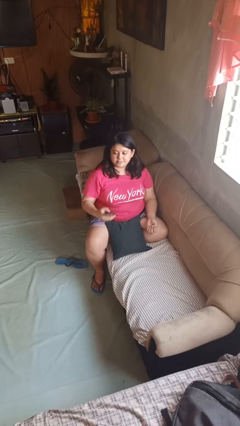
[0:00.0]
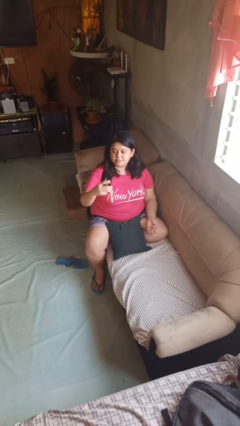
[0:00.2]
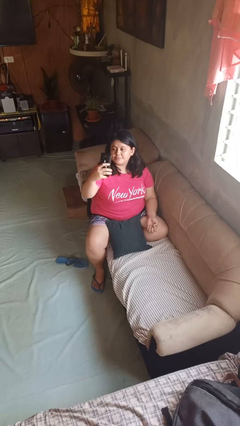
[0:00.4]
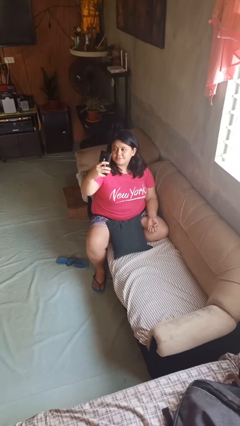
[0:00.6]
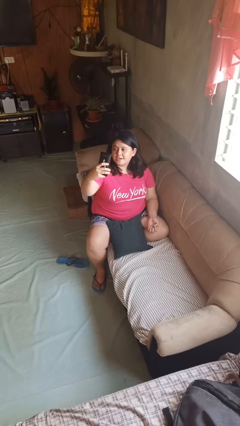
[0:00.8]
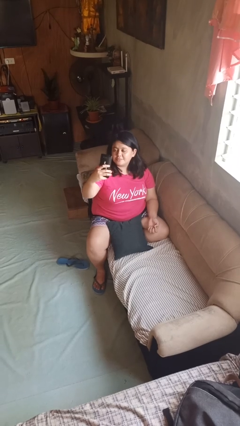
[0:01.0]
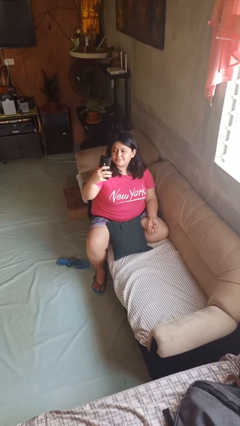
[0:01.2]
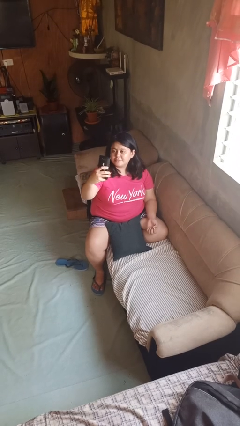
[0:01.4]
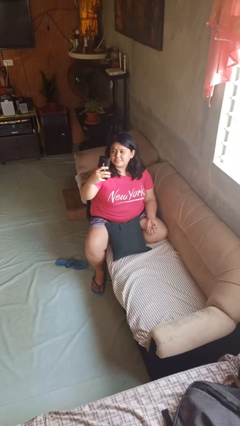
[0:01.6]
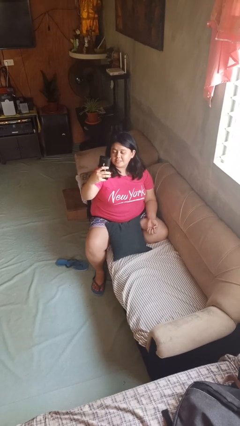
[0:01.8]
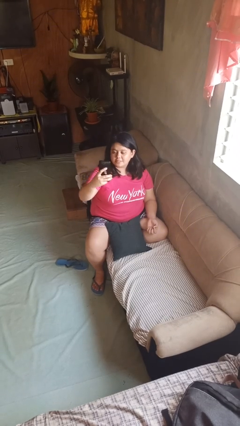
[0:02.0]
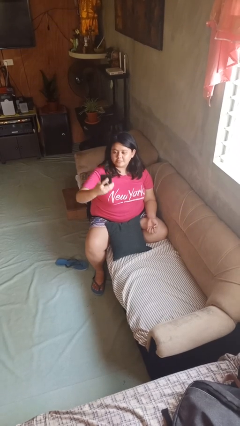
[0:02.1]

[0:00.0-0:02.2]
person takes selfie

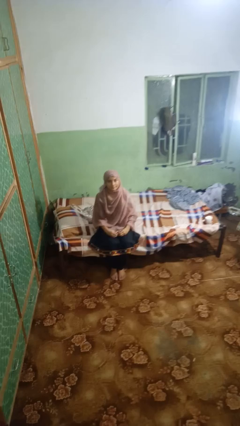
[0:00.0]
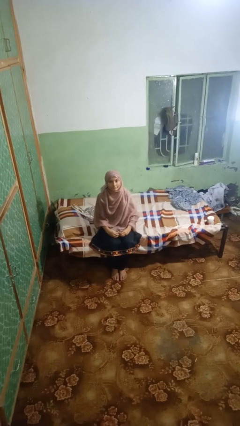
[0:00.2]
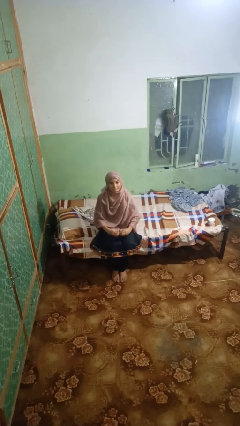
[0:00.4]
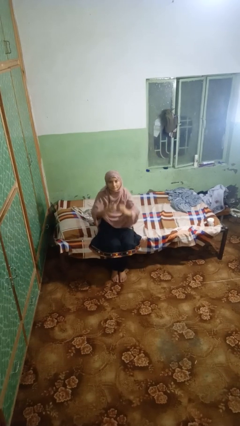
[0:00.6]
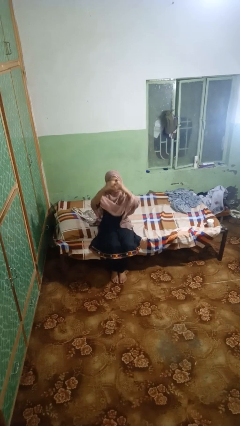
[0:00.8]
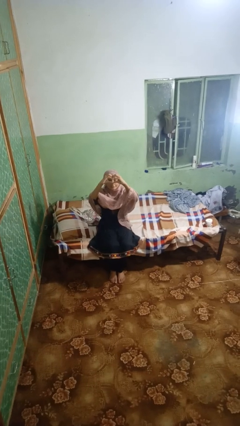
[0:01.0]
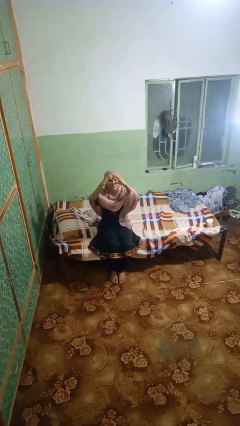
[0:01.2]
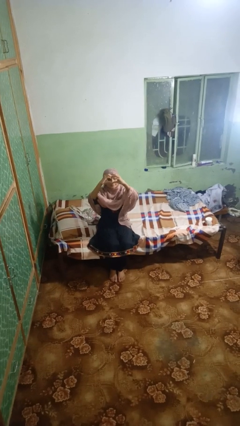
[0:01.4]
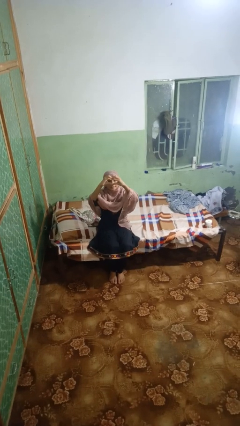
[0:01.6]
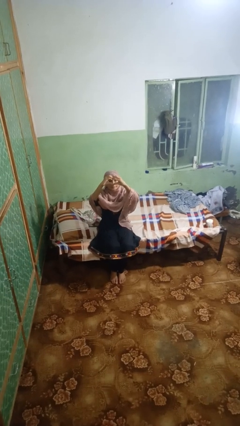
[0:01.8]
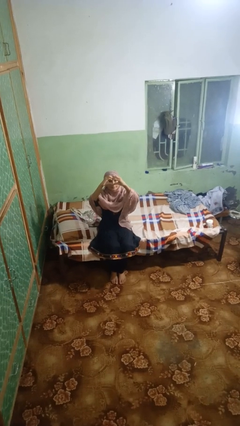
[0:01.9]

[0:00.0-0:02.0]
person gestures heart

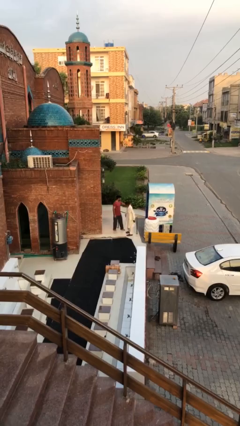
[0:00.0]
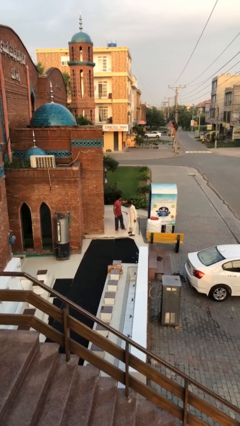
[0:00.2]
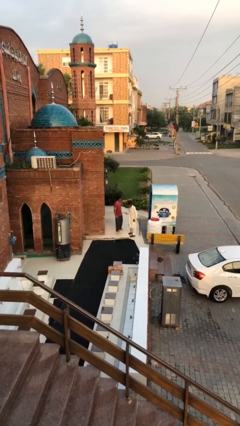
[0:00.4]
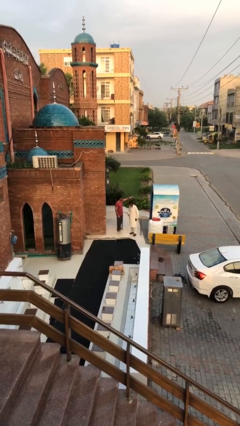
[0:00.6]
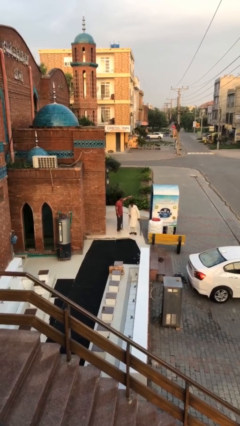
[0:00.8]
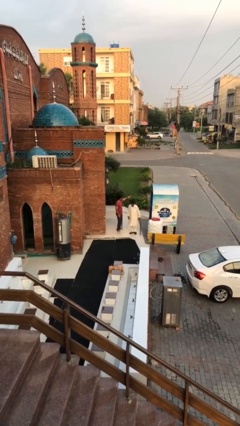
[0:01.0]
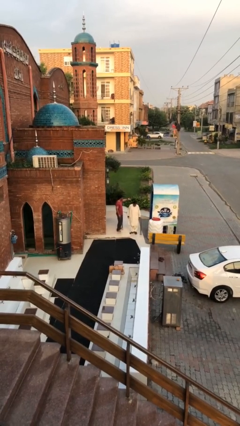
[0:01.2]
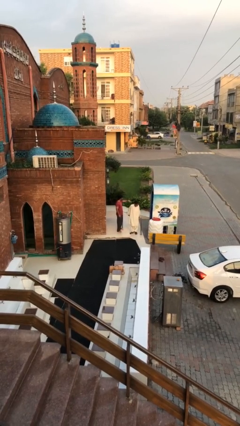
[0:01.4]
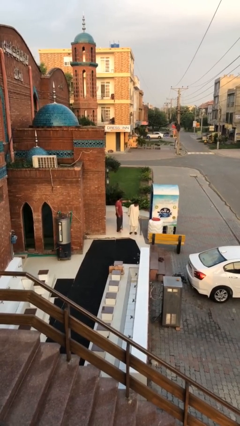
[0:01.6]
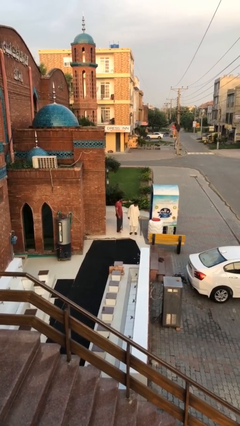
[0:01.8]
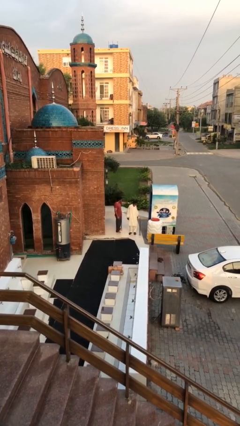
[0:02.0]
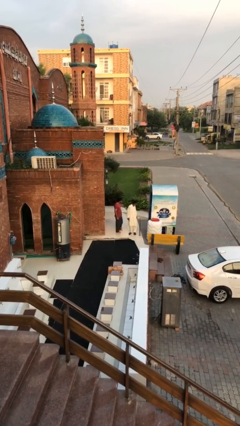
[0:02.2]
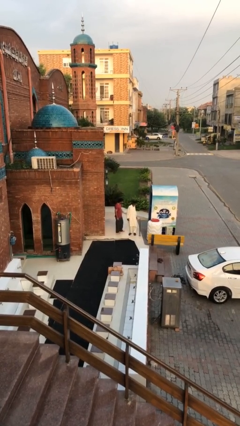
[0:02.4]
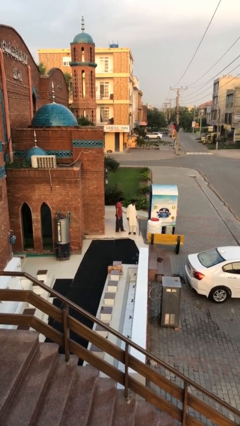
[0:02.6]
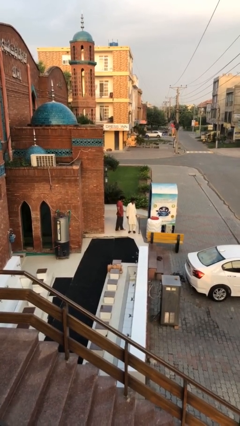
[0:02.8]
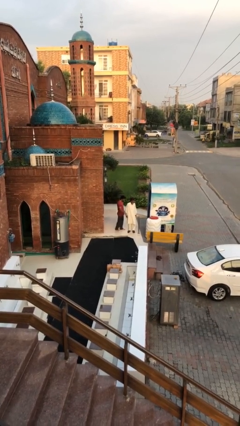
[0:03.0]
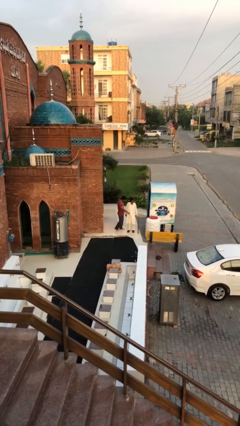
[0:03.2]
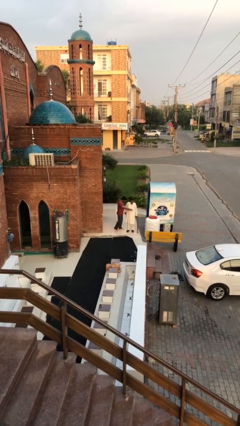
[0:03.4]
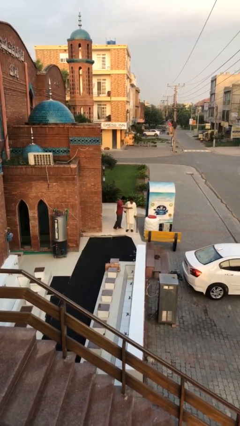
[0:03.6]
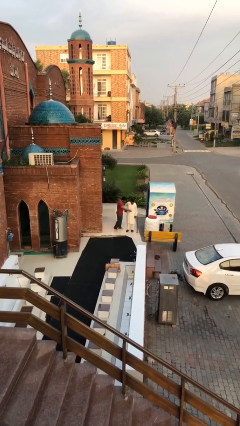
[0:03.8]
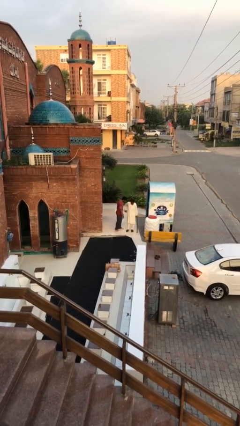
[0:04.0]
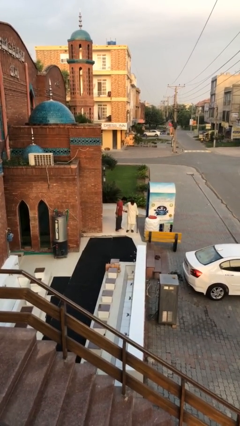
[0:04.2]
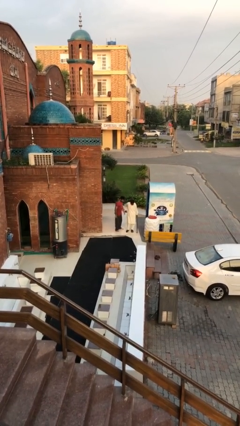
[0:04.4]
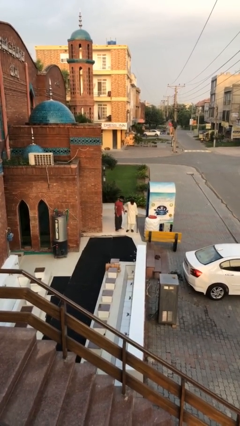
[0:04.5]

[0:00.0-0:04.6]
person talks to person

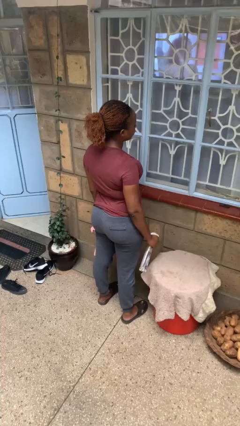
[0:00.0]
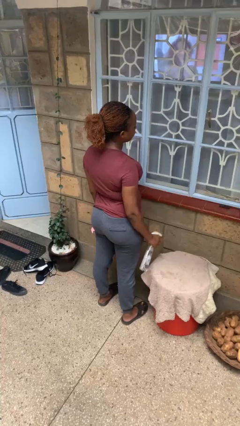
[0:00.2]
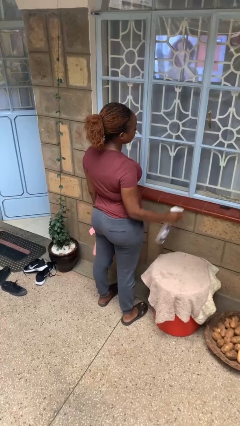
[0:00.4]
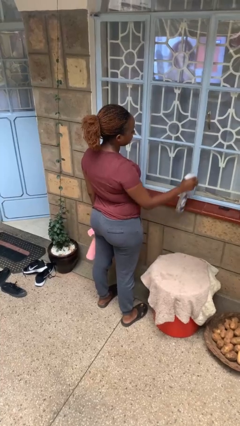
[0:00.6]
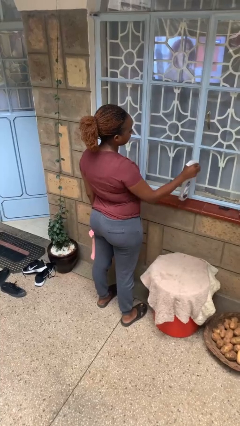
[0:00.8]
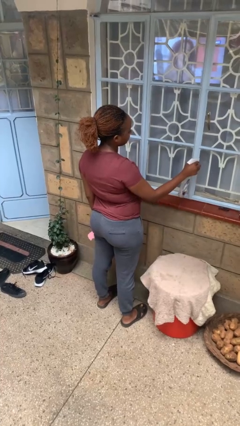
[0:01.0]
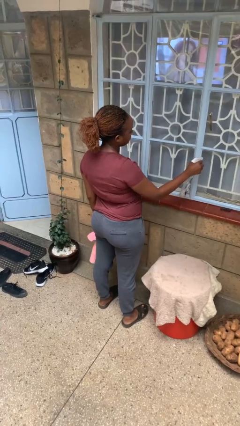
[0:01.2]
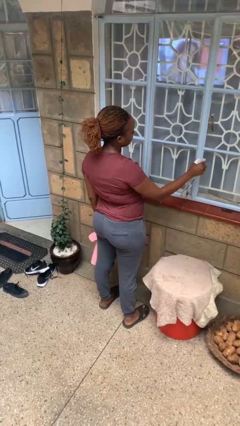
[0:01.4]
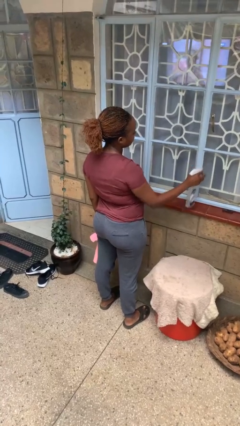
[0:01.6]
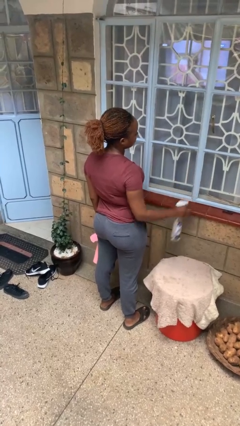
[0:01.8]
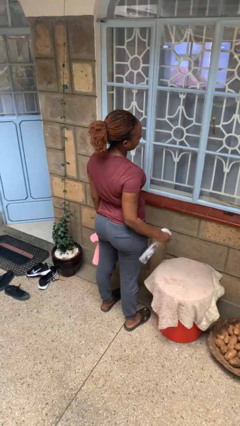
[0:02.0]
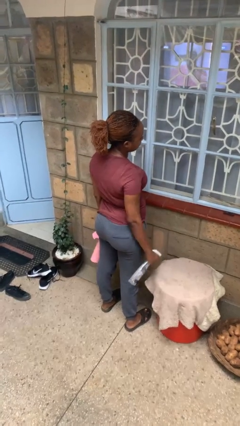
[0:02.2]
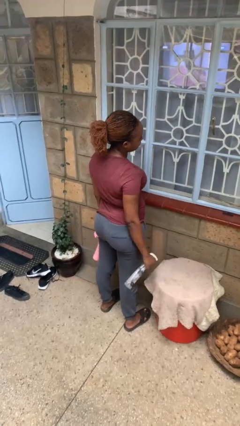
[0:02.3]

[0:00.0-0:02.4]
person sprays from bottle

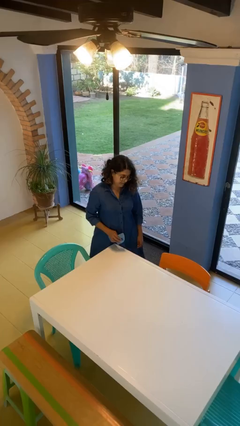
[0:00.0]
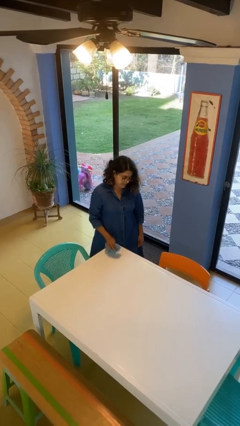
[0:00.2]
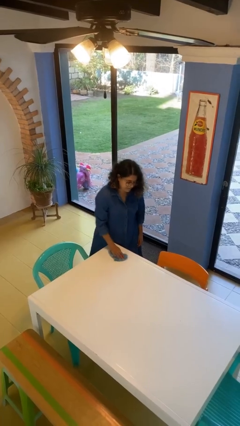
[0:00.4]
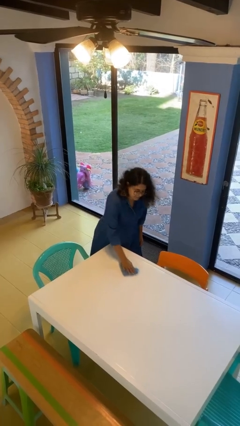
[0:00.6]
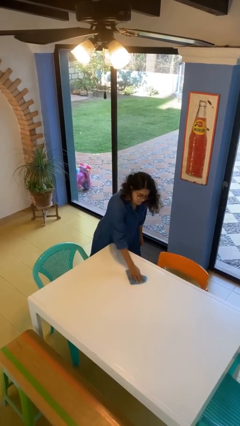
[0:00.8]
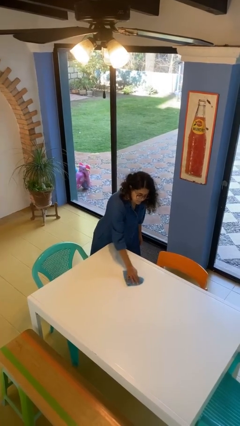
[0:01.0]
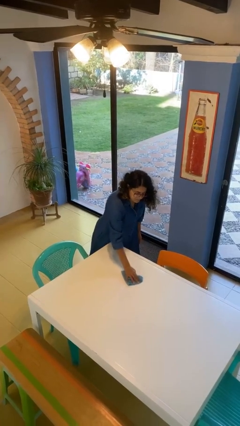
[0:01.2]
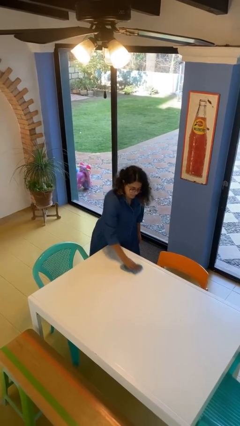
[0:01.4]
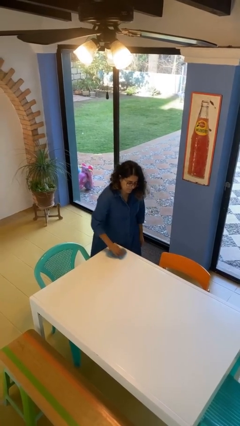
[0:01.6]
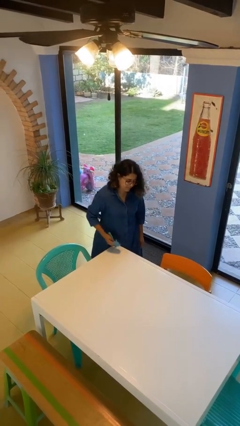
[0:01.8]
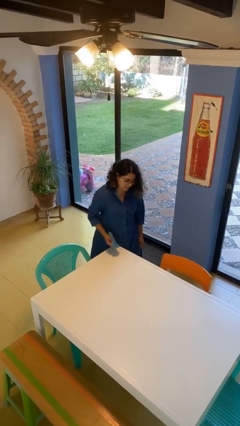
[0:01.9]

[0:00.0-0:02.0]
person cleans table with rag

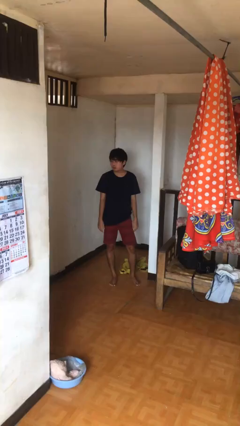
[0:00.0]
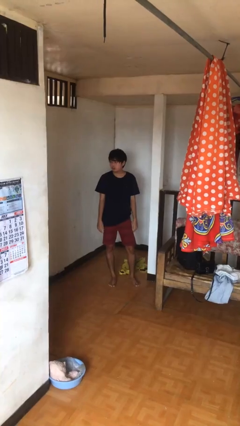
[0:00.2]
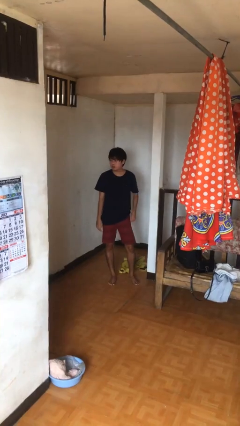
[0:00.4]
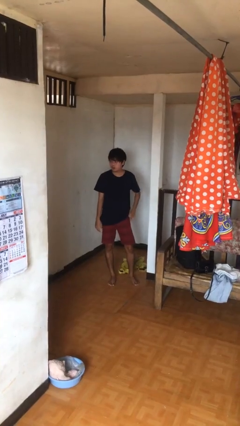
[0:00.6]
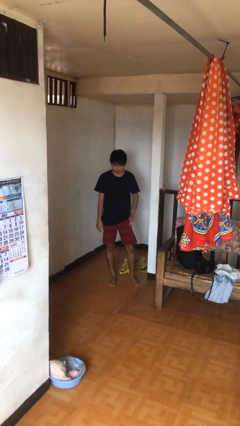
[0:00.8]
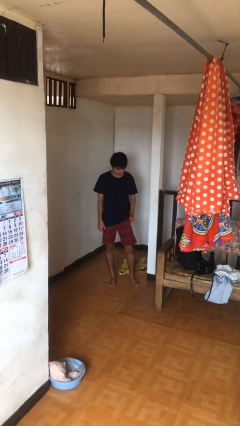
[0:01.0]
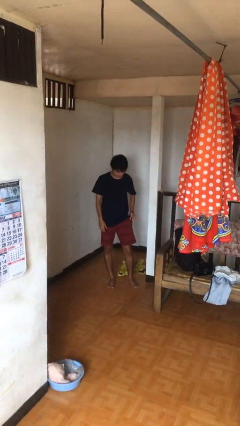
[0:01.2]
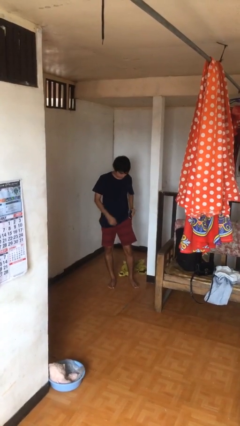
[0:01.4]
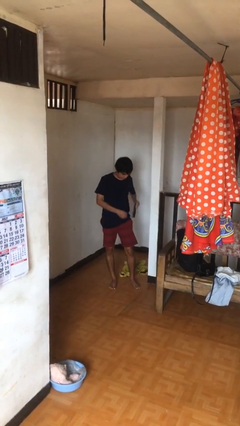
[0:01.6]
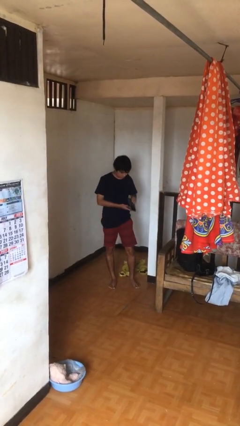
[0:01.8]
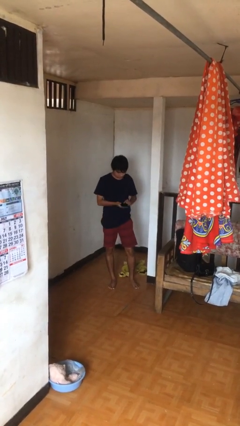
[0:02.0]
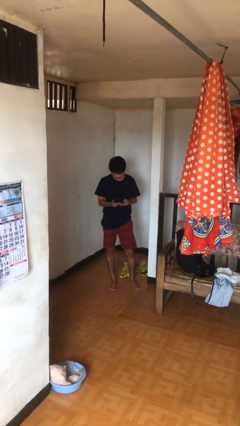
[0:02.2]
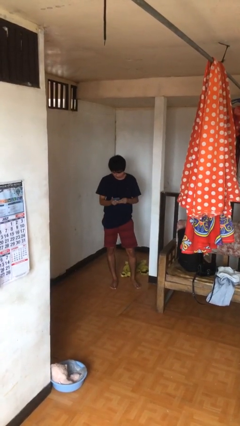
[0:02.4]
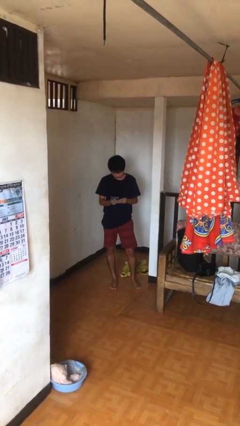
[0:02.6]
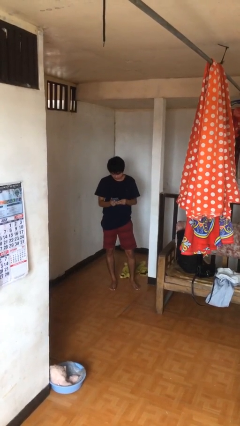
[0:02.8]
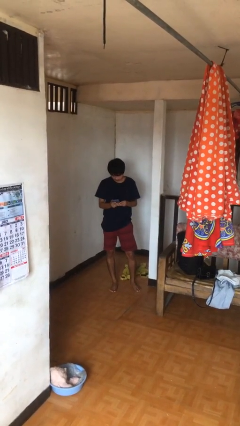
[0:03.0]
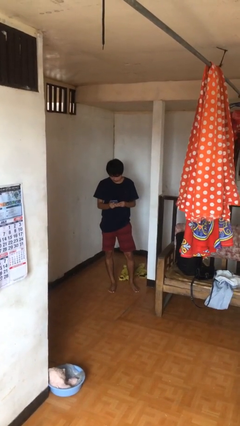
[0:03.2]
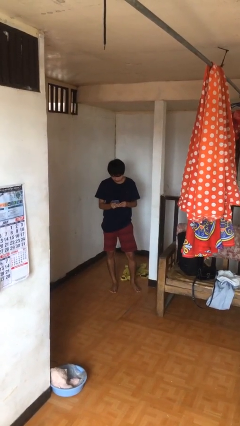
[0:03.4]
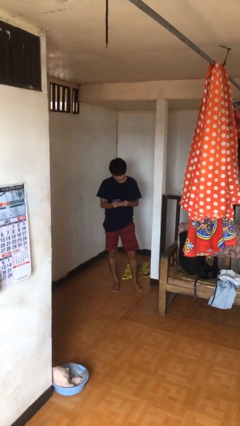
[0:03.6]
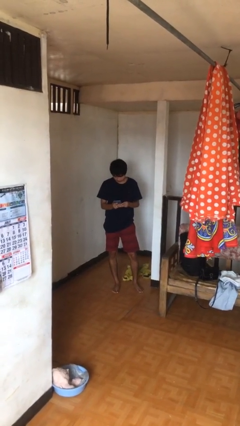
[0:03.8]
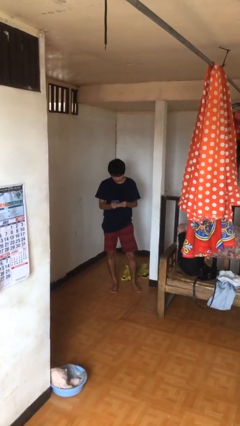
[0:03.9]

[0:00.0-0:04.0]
person takes phone from pocket
